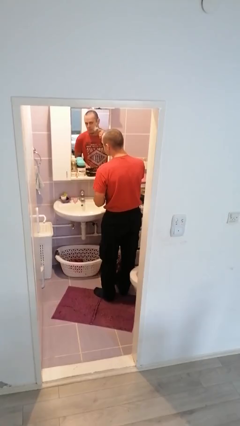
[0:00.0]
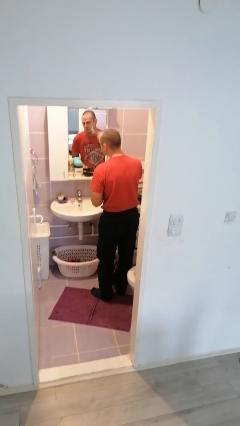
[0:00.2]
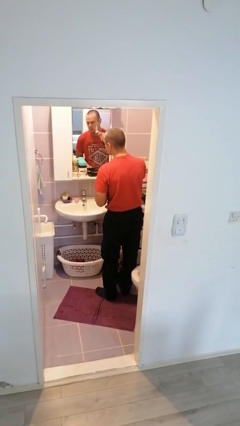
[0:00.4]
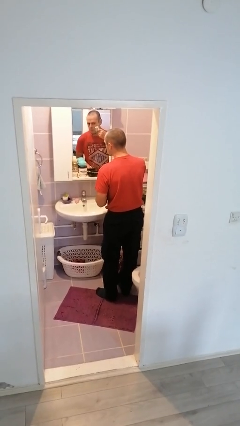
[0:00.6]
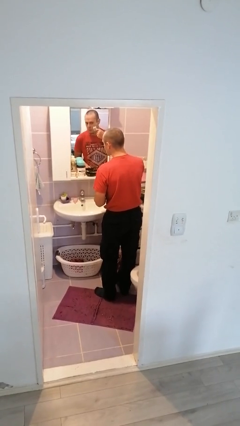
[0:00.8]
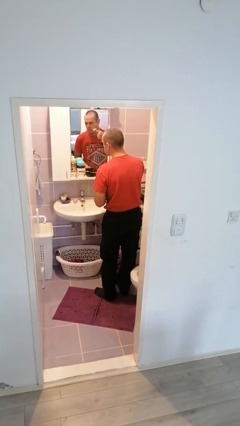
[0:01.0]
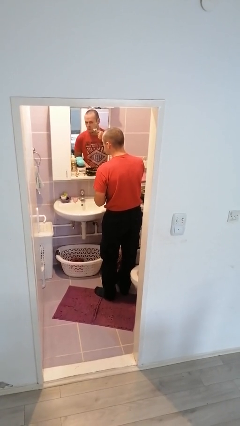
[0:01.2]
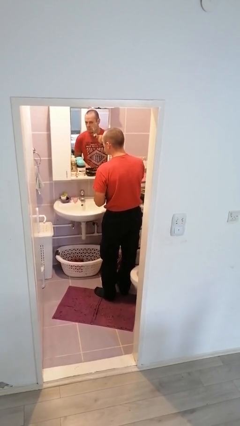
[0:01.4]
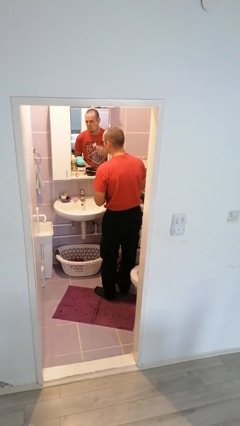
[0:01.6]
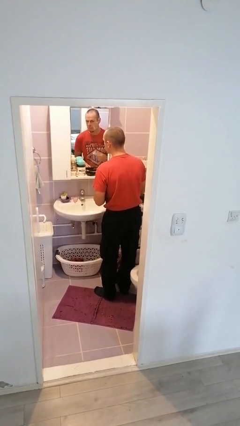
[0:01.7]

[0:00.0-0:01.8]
person shaves face

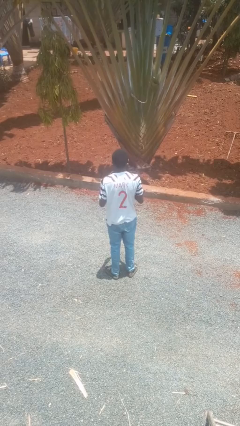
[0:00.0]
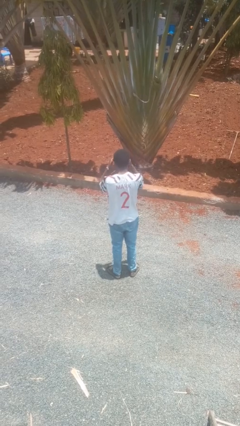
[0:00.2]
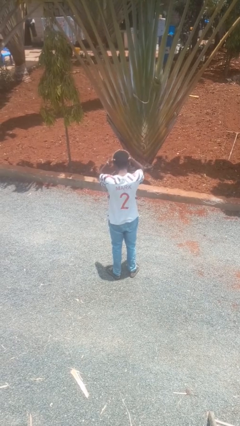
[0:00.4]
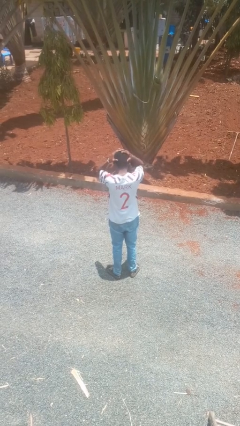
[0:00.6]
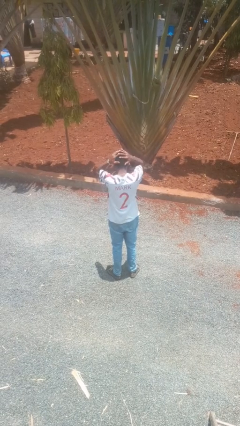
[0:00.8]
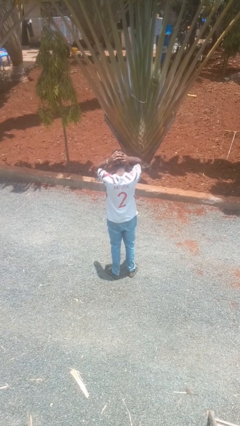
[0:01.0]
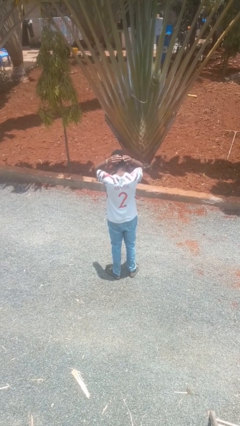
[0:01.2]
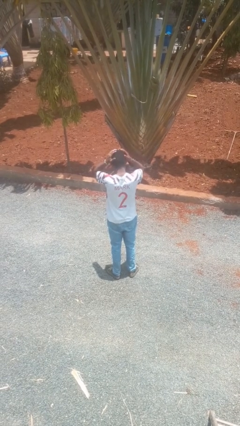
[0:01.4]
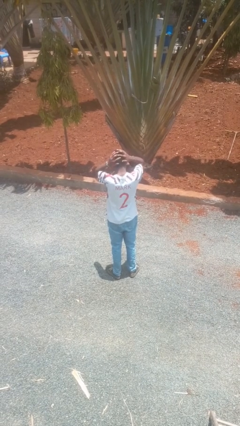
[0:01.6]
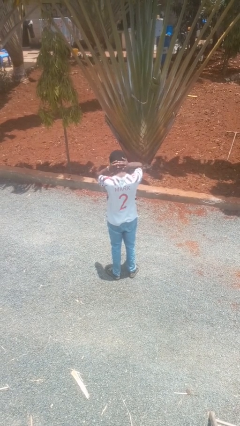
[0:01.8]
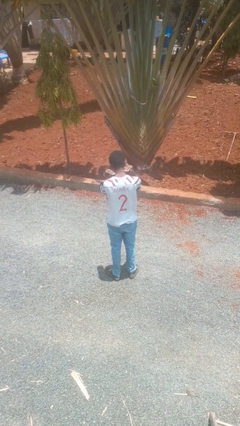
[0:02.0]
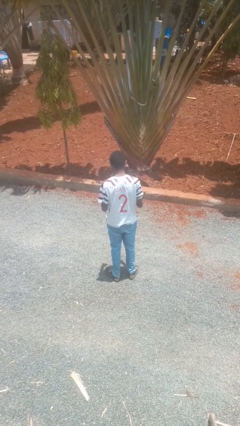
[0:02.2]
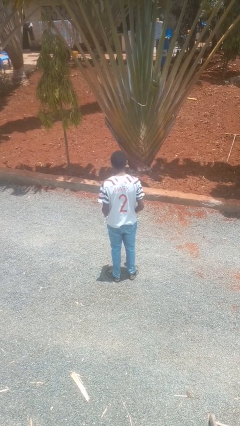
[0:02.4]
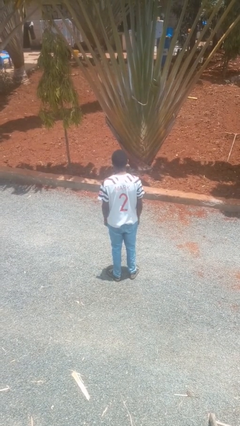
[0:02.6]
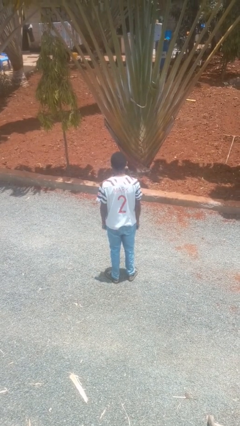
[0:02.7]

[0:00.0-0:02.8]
person strokes hair

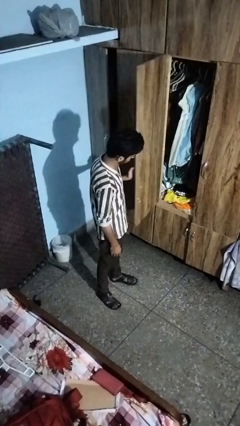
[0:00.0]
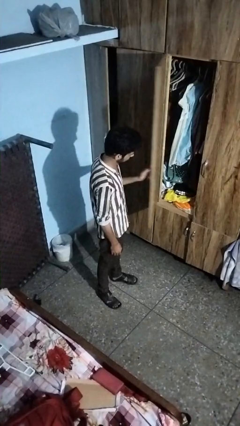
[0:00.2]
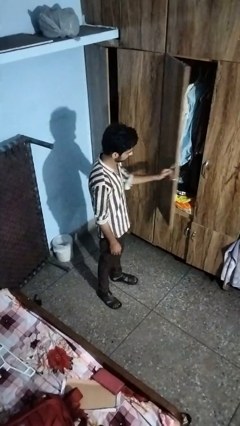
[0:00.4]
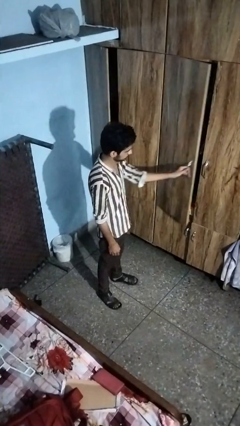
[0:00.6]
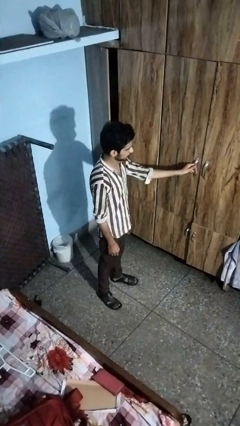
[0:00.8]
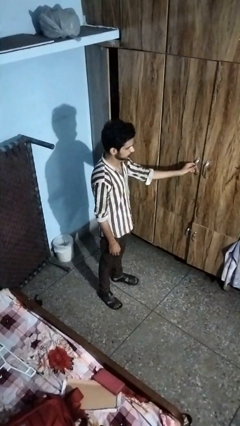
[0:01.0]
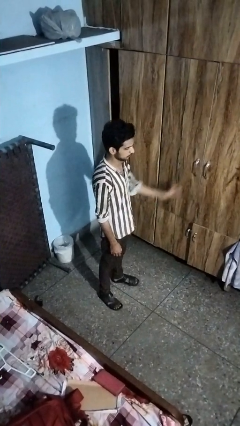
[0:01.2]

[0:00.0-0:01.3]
person closes closet door

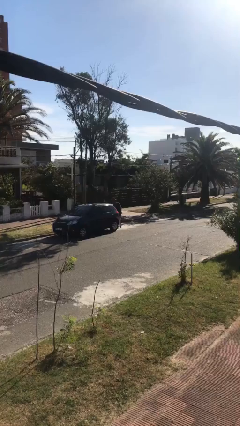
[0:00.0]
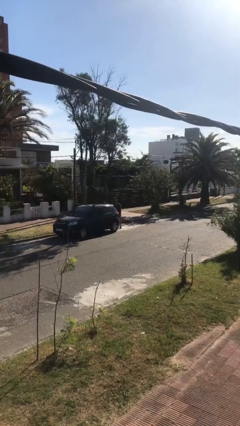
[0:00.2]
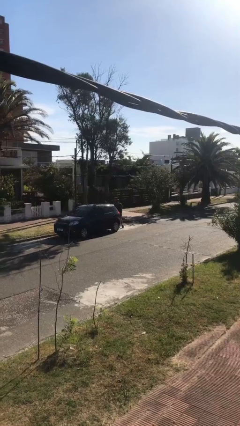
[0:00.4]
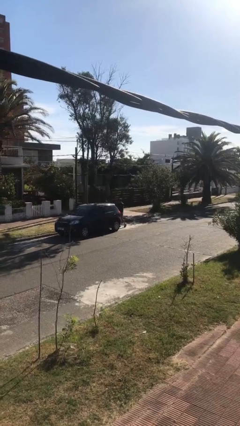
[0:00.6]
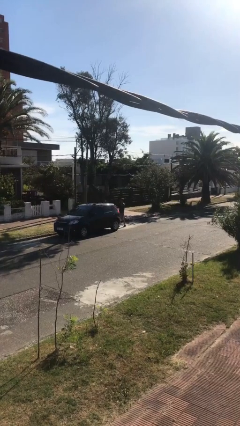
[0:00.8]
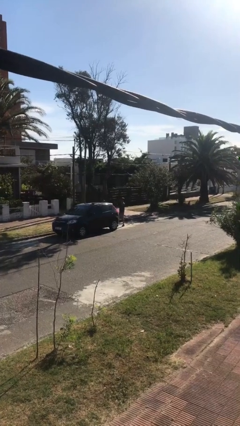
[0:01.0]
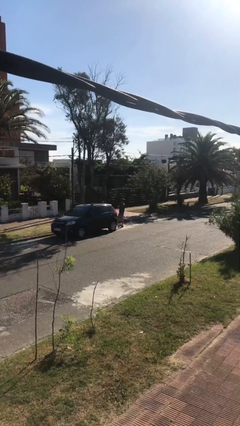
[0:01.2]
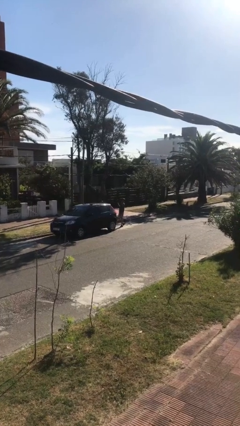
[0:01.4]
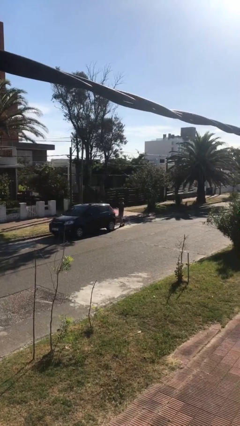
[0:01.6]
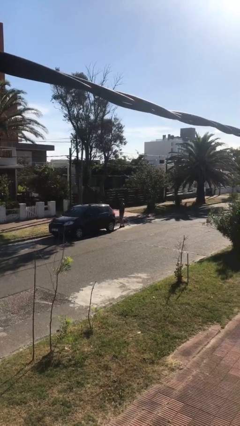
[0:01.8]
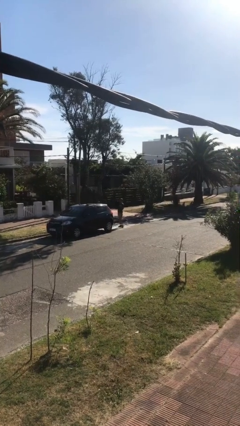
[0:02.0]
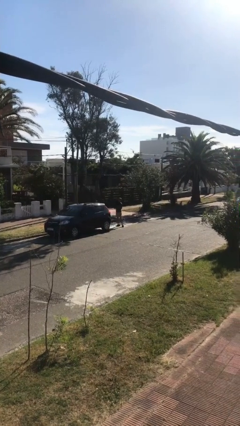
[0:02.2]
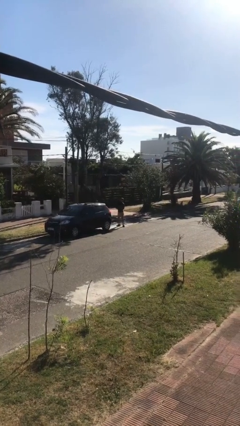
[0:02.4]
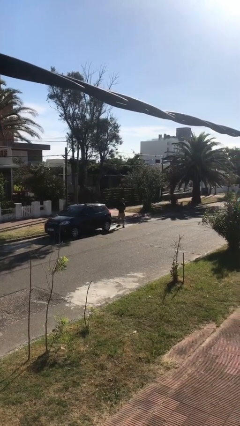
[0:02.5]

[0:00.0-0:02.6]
person unloads car

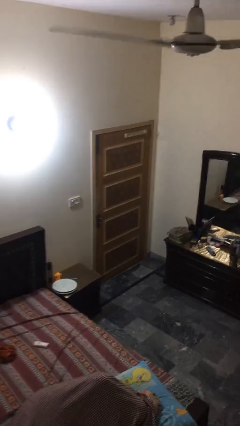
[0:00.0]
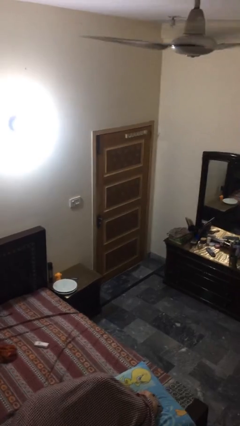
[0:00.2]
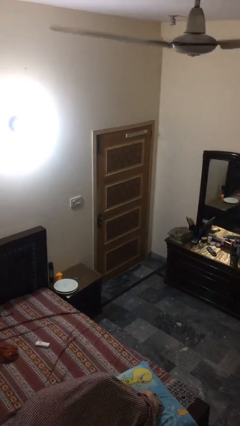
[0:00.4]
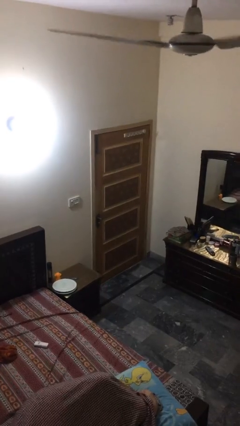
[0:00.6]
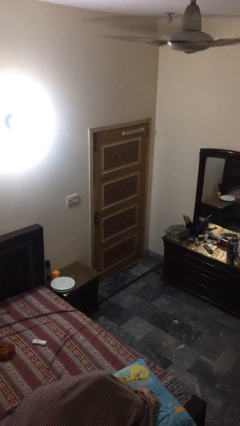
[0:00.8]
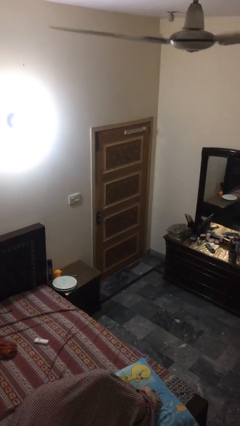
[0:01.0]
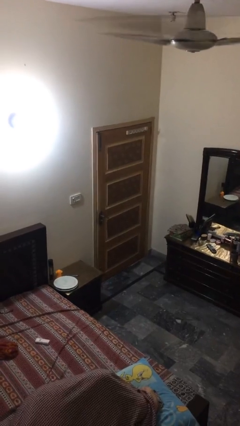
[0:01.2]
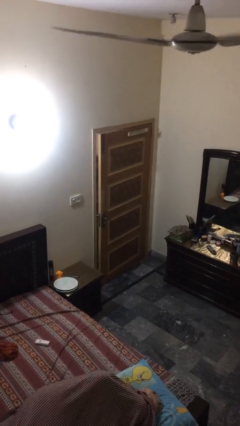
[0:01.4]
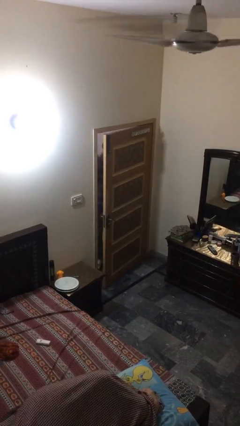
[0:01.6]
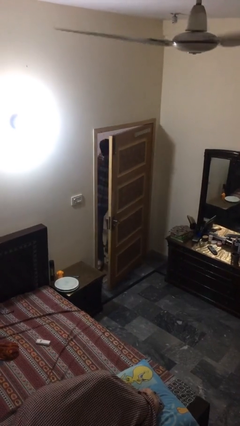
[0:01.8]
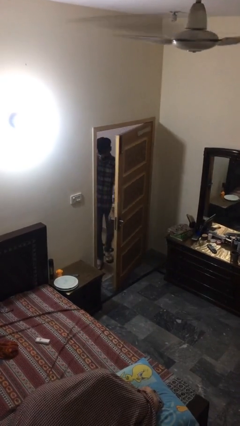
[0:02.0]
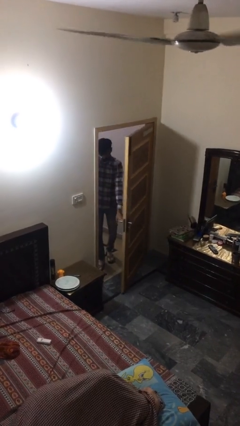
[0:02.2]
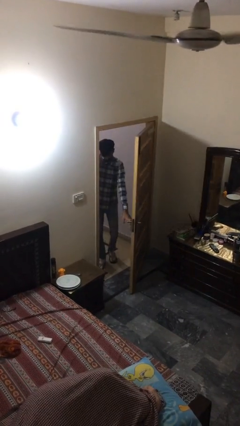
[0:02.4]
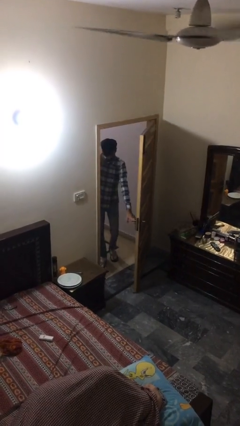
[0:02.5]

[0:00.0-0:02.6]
person opens facility door

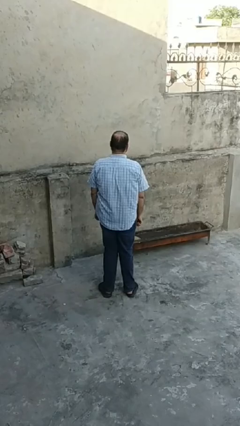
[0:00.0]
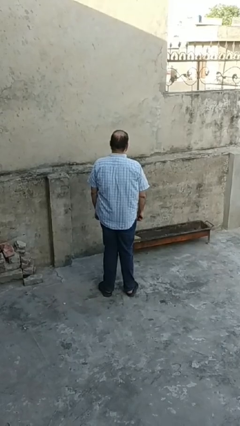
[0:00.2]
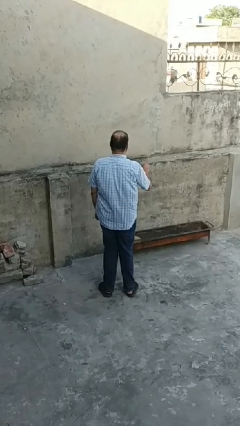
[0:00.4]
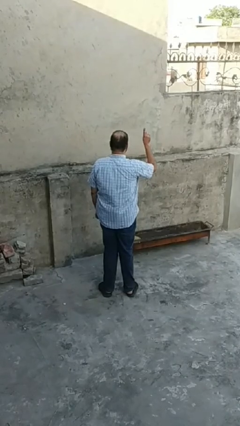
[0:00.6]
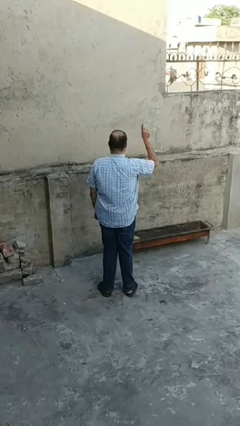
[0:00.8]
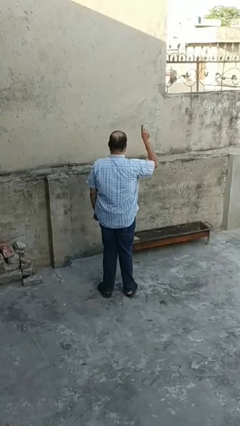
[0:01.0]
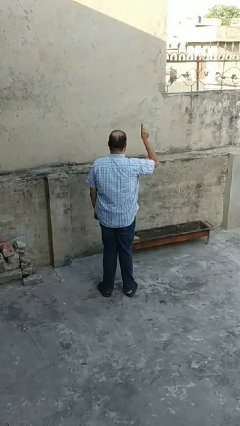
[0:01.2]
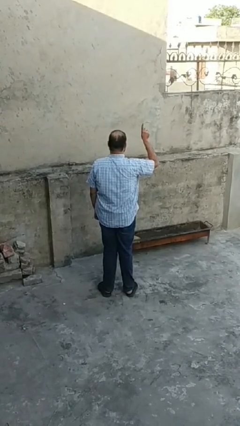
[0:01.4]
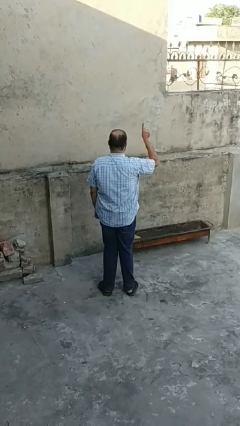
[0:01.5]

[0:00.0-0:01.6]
person gestures number one

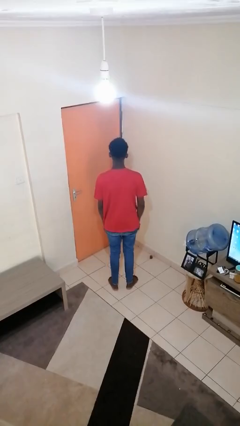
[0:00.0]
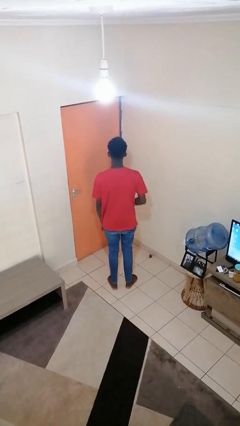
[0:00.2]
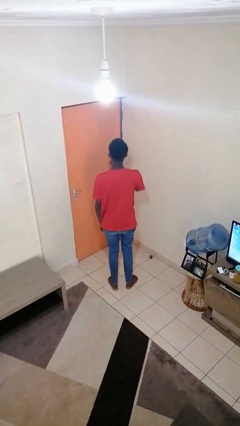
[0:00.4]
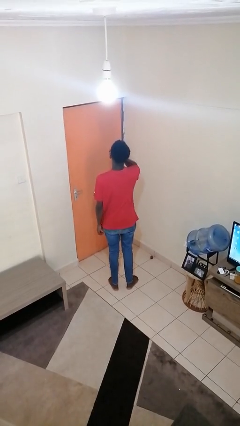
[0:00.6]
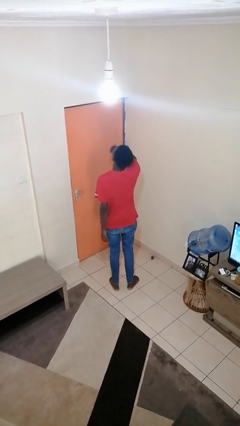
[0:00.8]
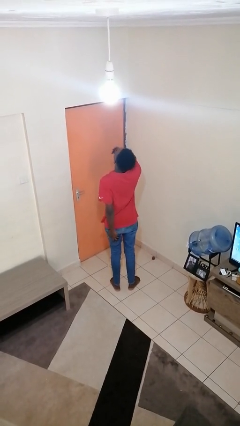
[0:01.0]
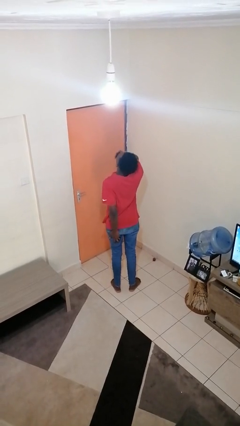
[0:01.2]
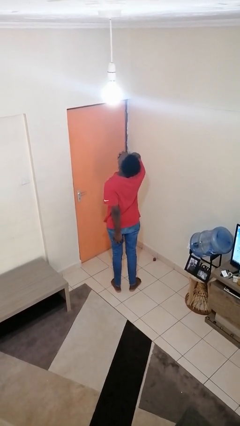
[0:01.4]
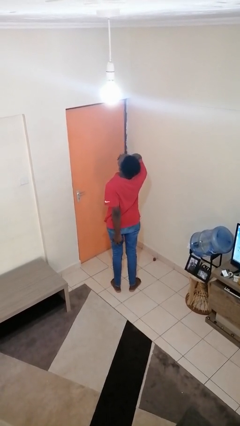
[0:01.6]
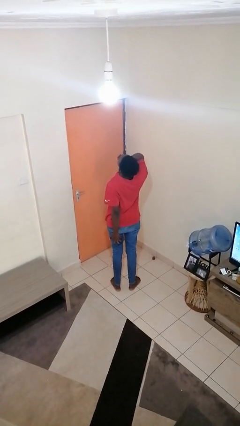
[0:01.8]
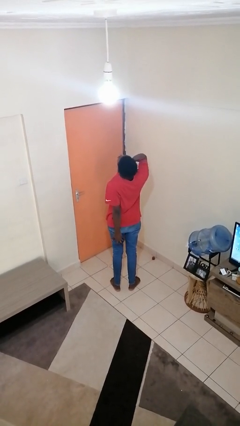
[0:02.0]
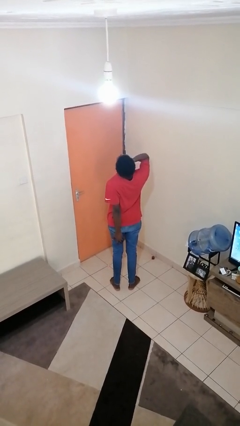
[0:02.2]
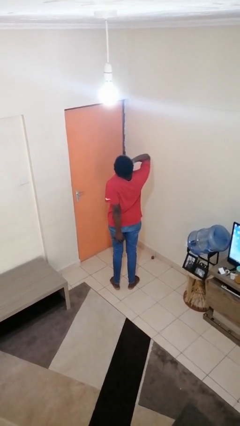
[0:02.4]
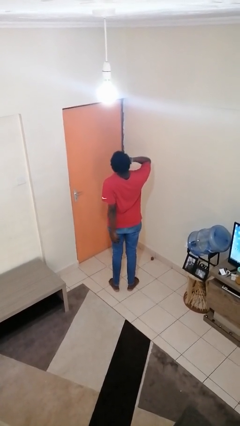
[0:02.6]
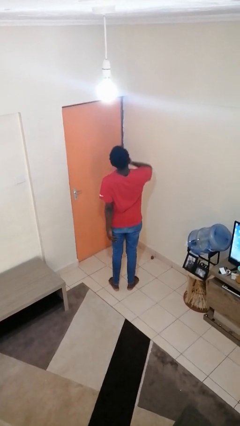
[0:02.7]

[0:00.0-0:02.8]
person yawns

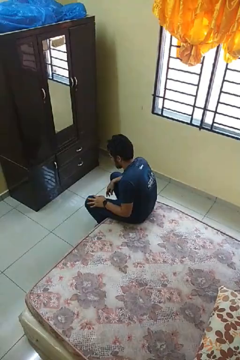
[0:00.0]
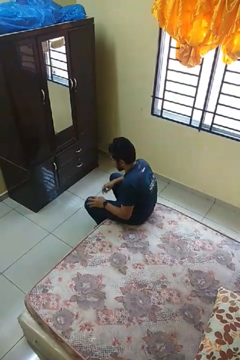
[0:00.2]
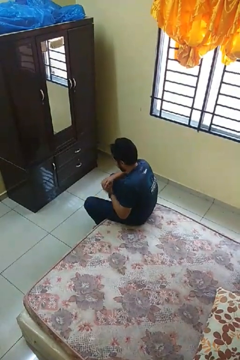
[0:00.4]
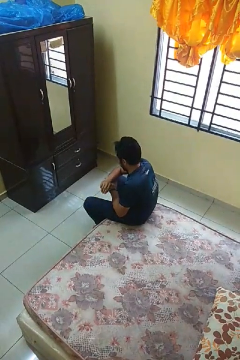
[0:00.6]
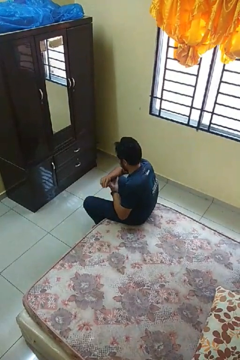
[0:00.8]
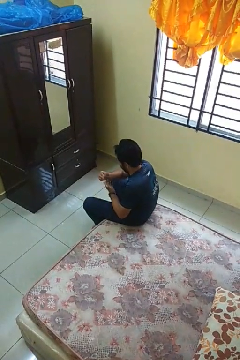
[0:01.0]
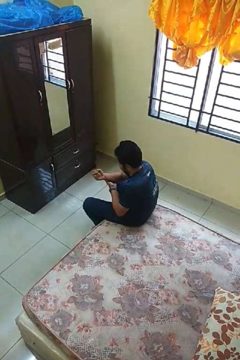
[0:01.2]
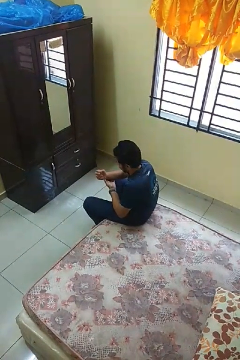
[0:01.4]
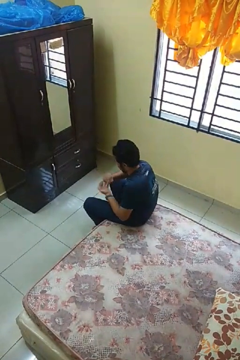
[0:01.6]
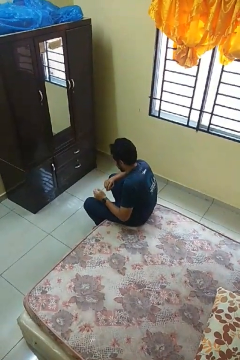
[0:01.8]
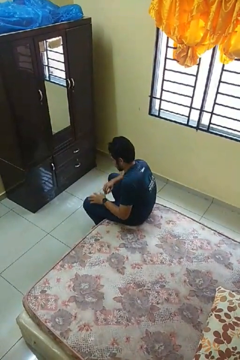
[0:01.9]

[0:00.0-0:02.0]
person looks at hands in lap
